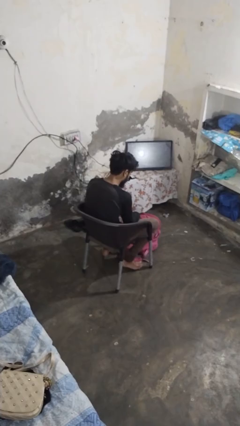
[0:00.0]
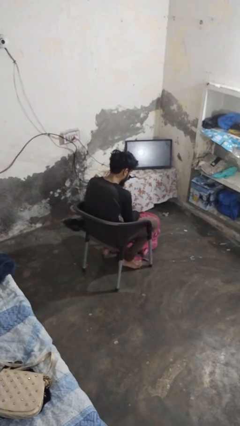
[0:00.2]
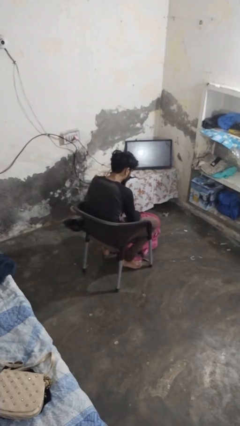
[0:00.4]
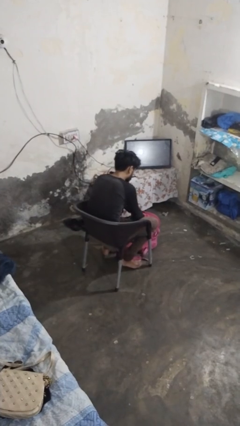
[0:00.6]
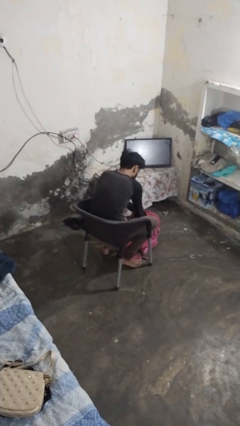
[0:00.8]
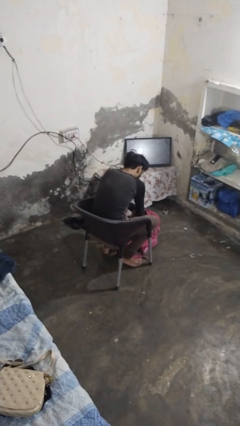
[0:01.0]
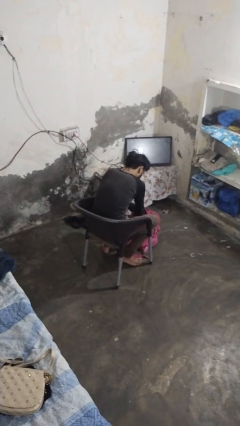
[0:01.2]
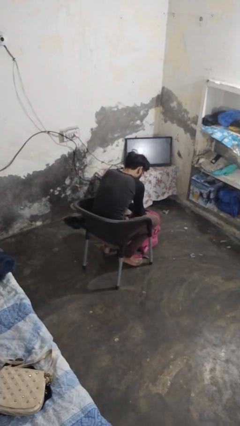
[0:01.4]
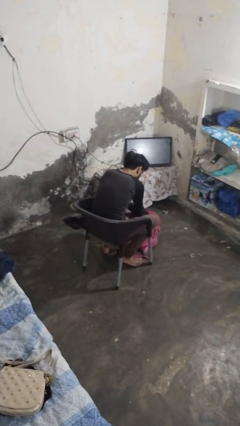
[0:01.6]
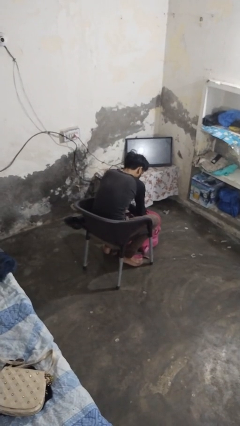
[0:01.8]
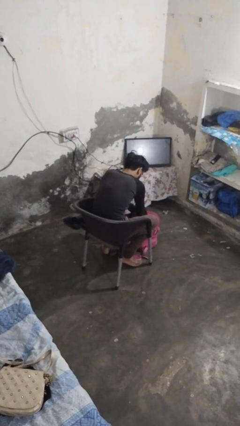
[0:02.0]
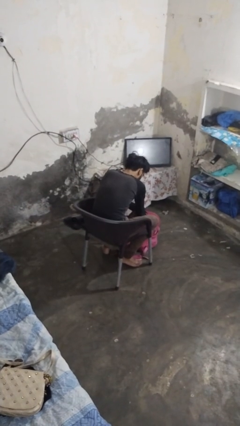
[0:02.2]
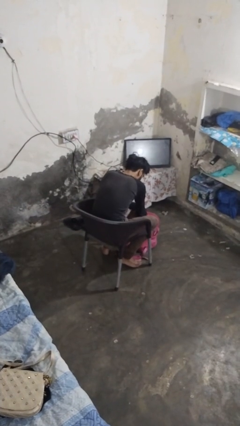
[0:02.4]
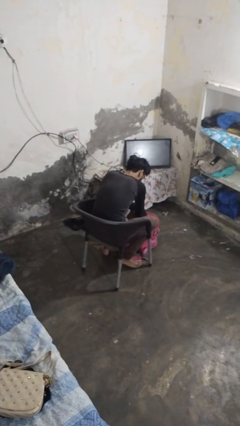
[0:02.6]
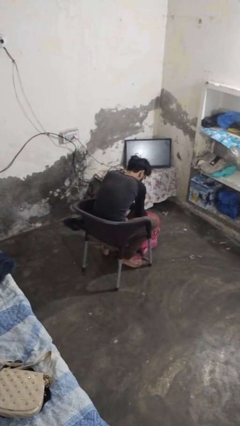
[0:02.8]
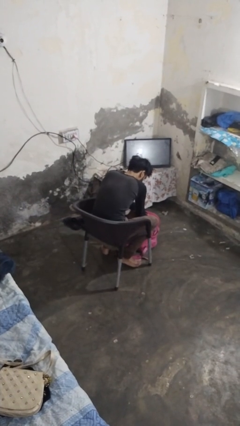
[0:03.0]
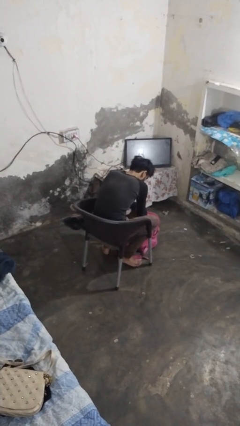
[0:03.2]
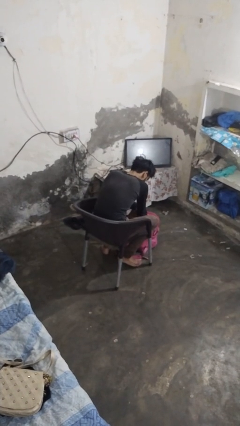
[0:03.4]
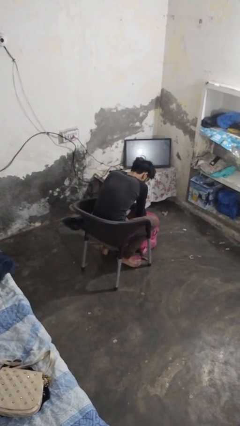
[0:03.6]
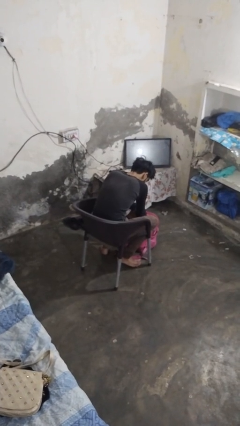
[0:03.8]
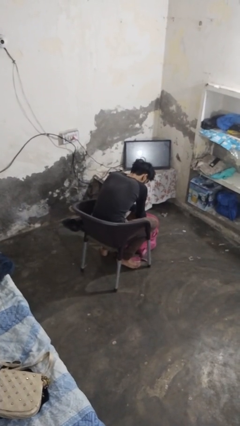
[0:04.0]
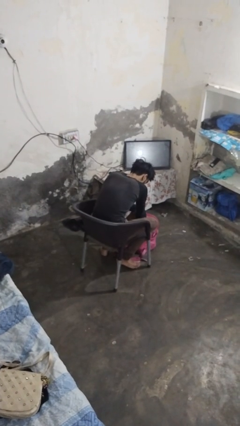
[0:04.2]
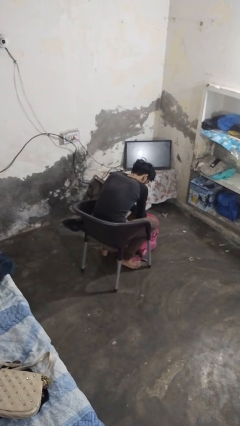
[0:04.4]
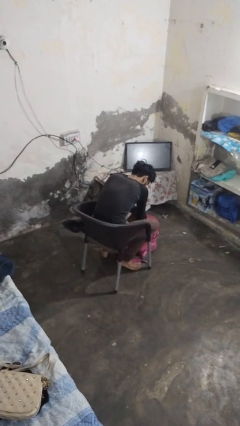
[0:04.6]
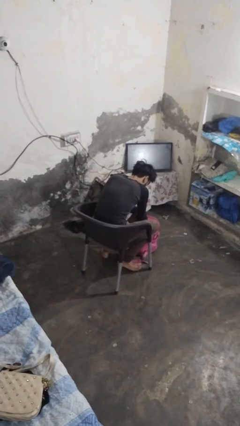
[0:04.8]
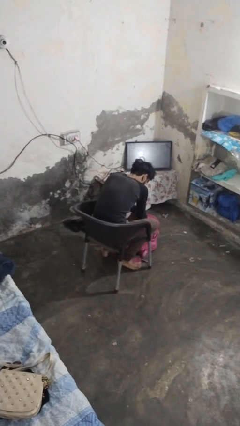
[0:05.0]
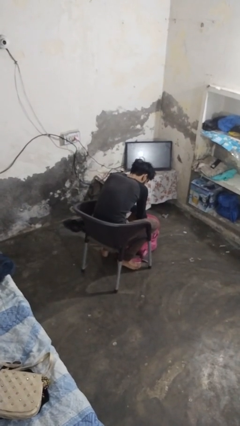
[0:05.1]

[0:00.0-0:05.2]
person searches in backpack

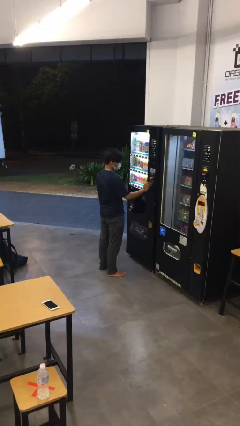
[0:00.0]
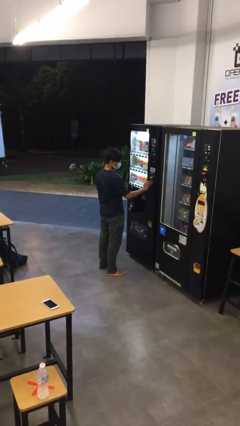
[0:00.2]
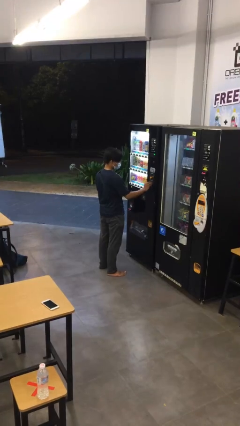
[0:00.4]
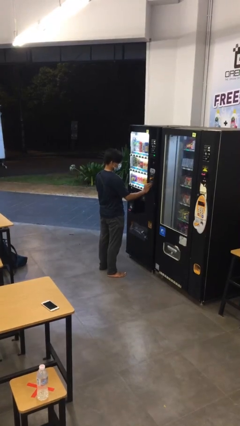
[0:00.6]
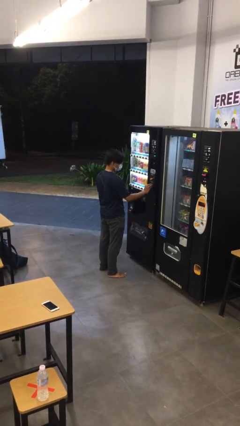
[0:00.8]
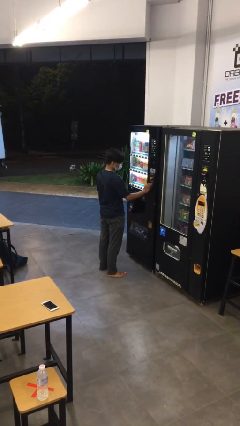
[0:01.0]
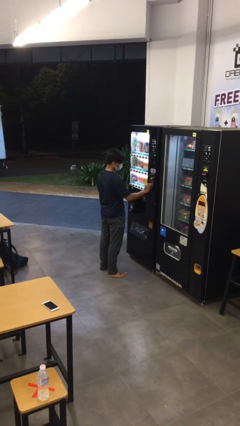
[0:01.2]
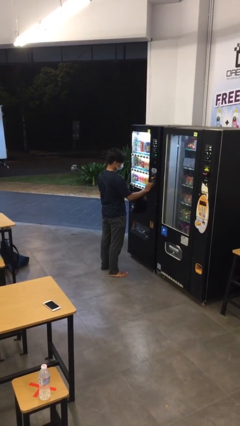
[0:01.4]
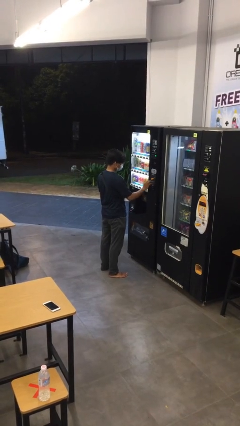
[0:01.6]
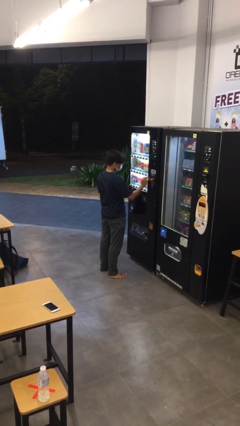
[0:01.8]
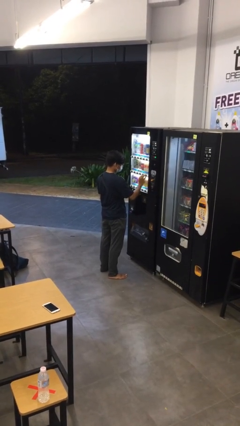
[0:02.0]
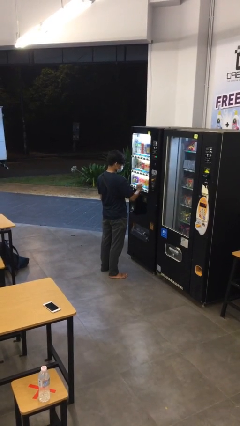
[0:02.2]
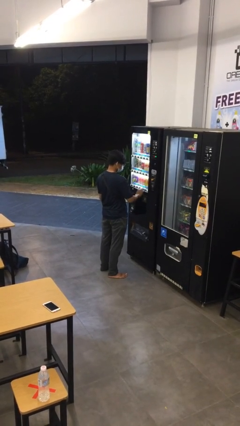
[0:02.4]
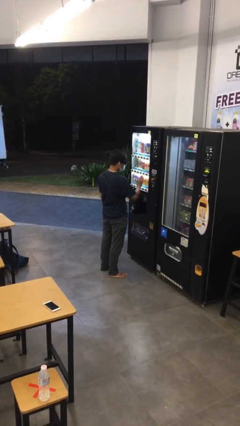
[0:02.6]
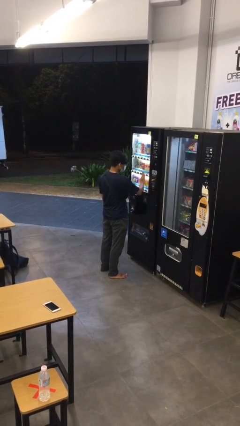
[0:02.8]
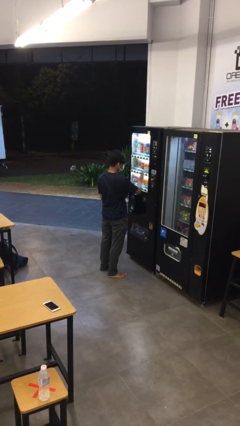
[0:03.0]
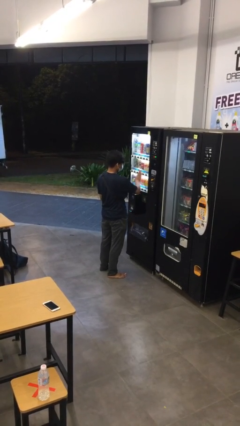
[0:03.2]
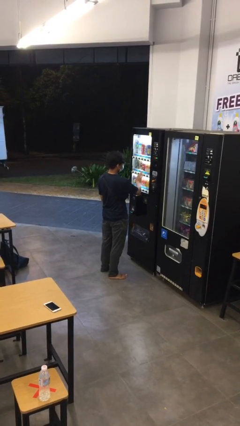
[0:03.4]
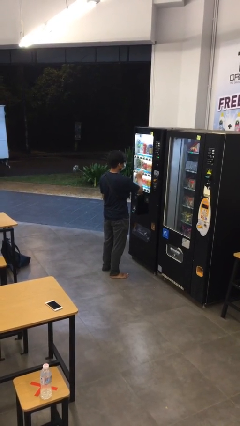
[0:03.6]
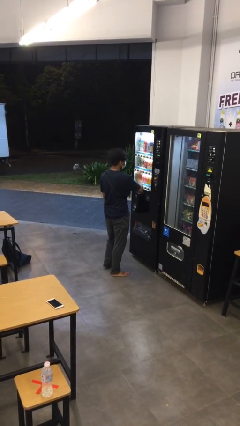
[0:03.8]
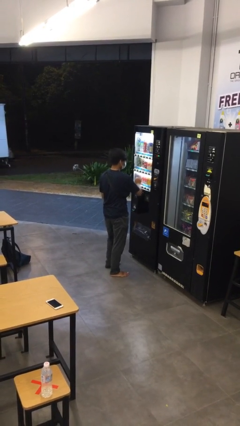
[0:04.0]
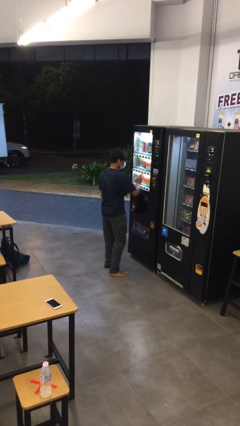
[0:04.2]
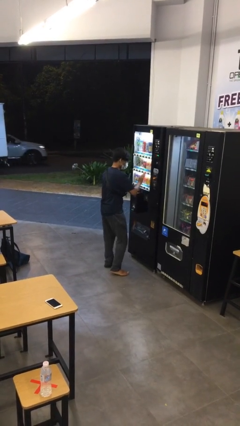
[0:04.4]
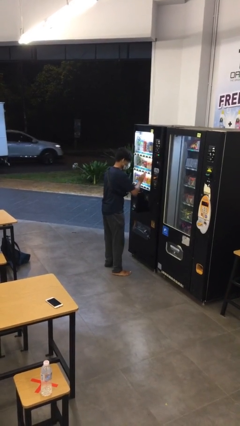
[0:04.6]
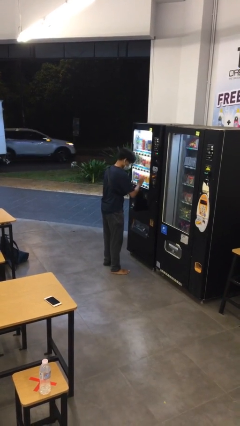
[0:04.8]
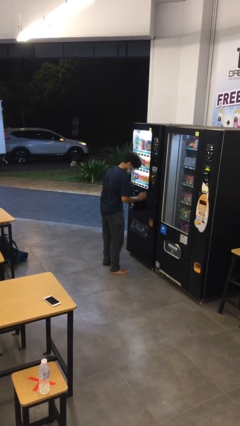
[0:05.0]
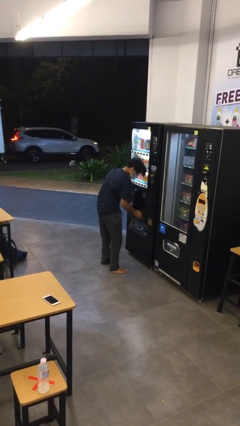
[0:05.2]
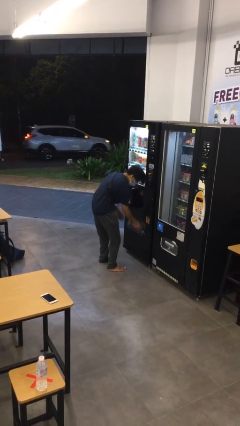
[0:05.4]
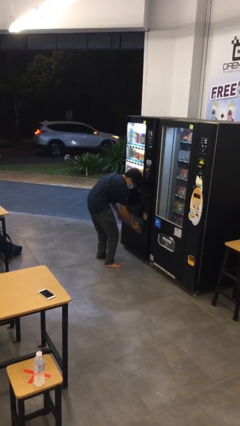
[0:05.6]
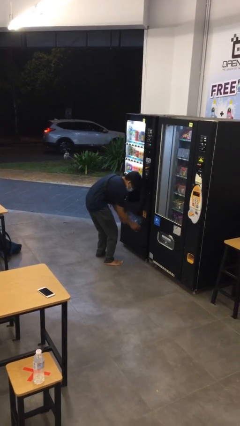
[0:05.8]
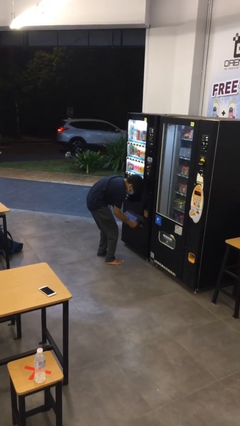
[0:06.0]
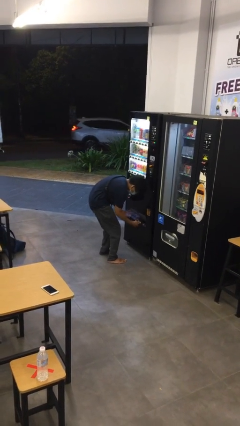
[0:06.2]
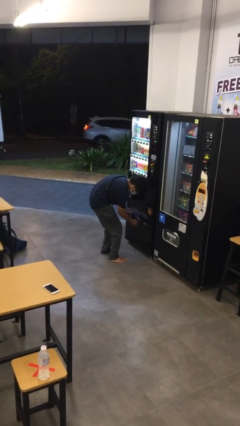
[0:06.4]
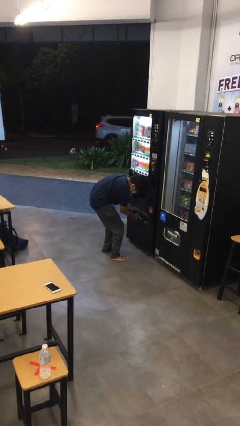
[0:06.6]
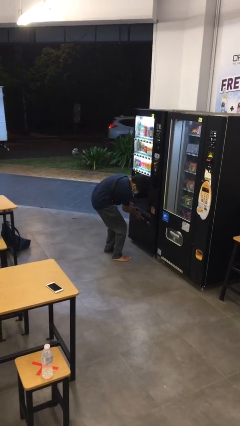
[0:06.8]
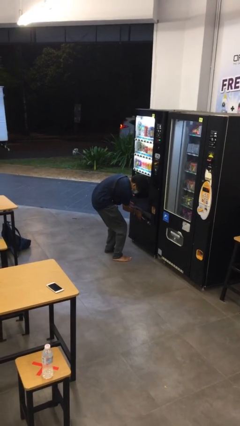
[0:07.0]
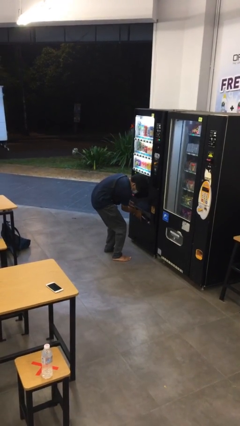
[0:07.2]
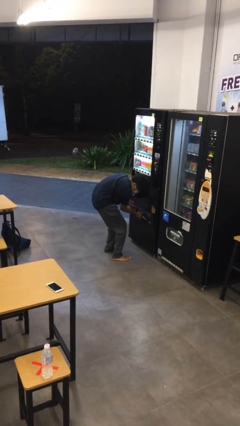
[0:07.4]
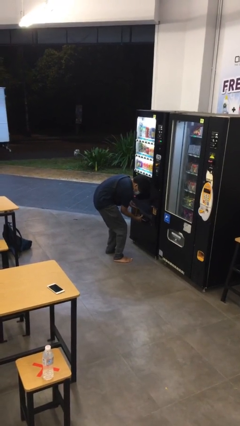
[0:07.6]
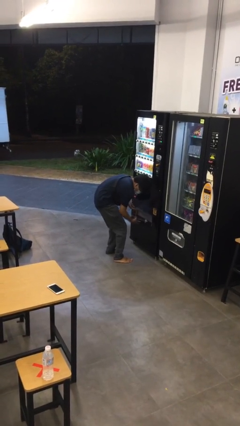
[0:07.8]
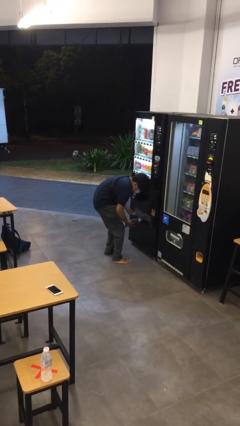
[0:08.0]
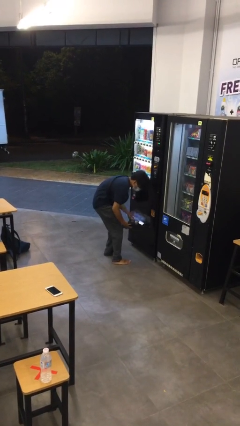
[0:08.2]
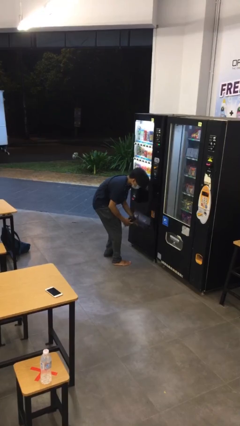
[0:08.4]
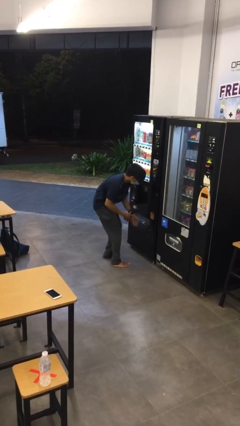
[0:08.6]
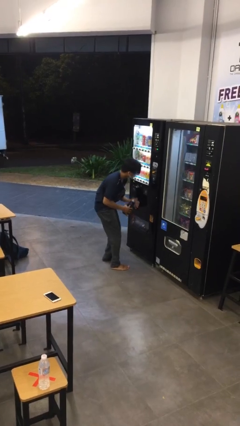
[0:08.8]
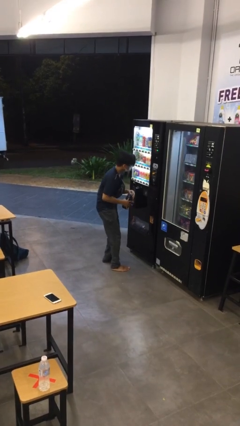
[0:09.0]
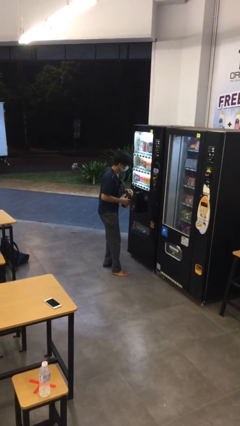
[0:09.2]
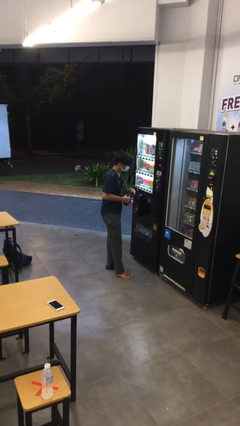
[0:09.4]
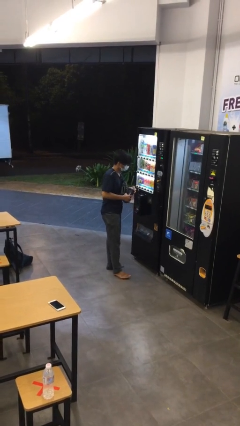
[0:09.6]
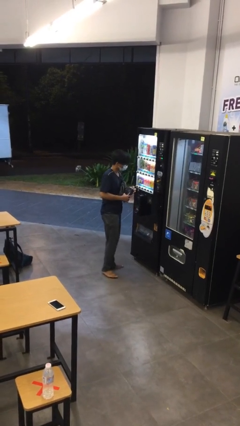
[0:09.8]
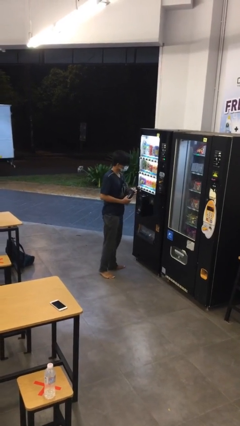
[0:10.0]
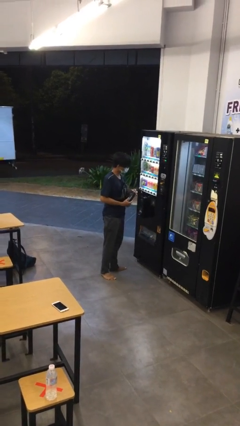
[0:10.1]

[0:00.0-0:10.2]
person purchases from machine

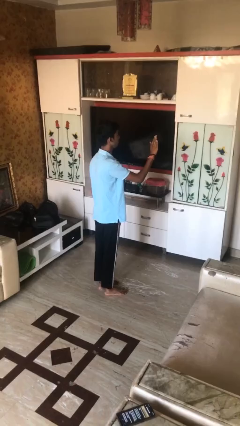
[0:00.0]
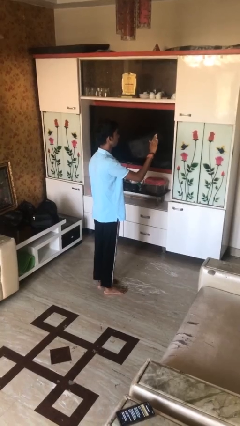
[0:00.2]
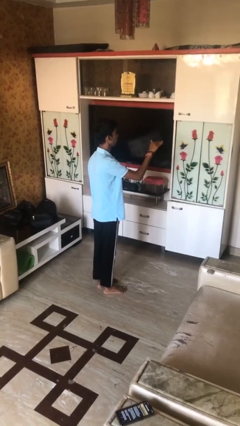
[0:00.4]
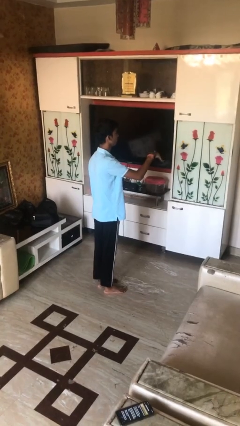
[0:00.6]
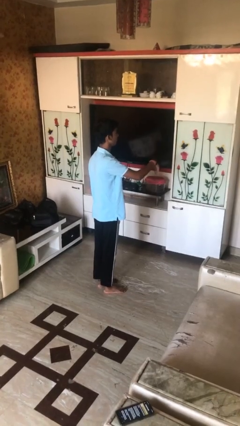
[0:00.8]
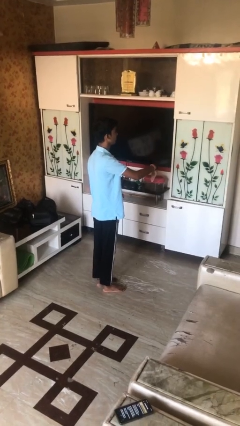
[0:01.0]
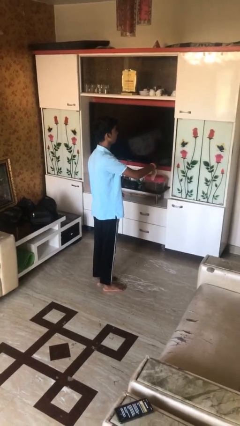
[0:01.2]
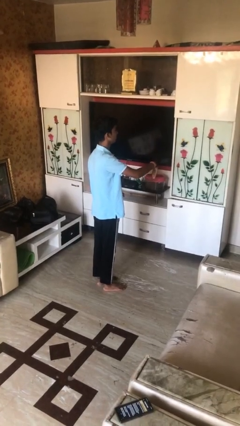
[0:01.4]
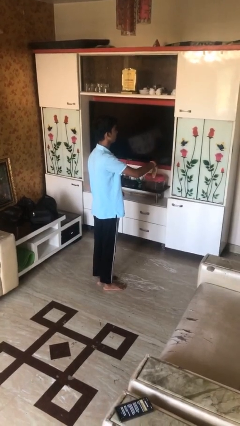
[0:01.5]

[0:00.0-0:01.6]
person gestures swipe down

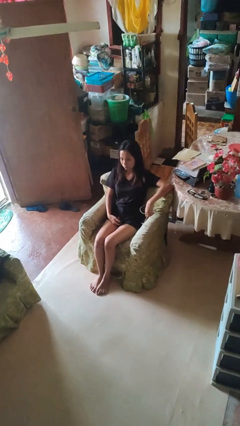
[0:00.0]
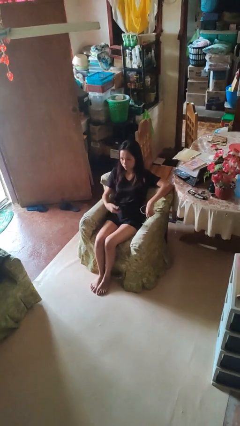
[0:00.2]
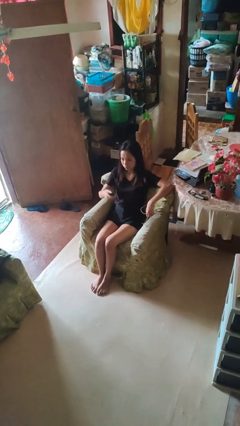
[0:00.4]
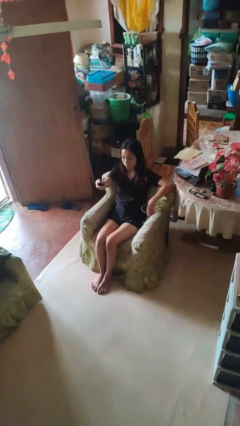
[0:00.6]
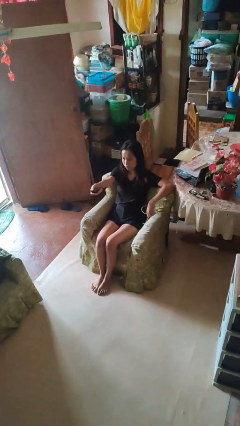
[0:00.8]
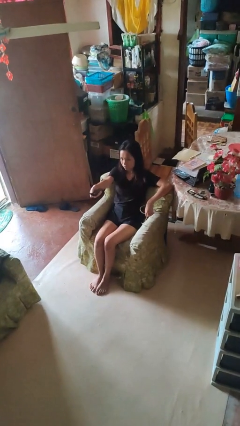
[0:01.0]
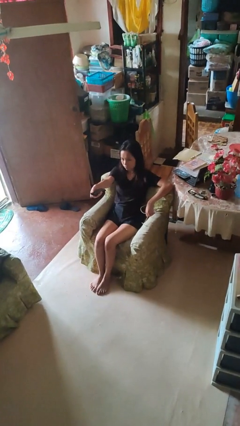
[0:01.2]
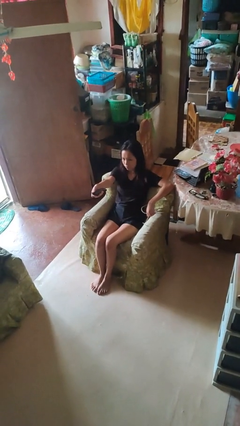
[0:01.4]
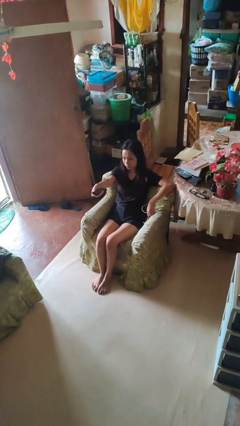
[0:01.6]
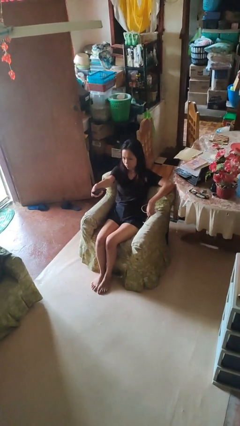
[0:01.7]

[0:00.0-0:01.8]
person uses television remote
